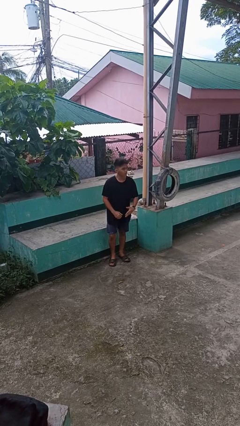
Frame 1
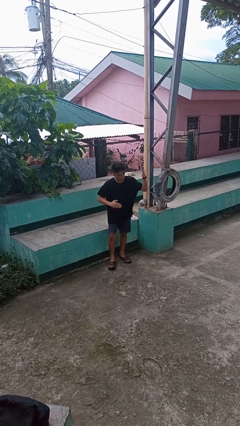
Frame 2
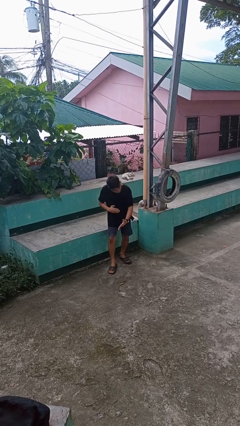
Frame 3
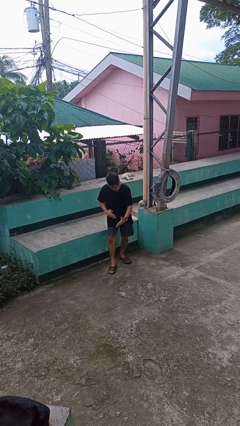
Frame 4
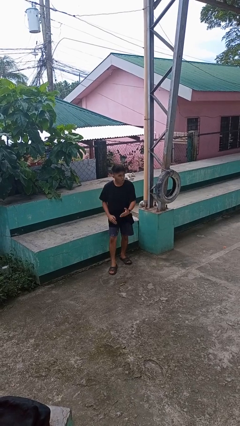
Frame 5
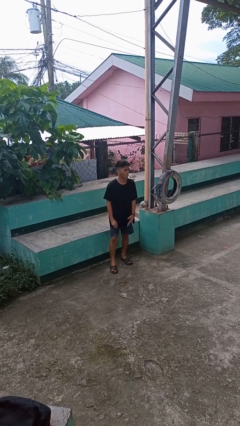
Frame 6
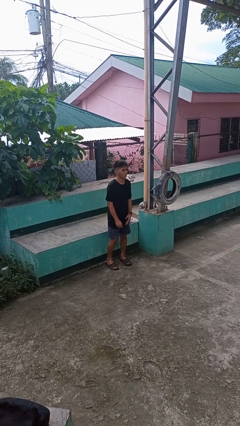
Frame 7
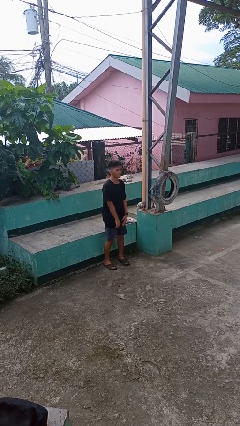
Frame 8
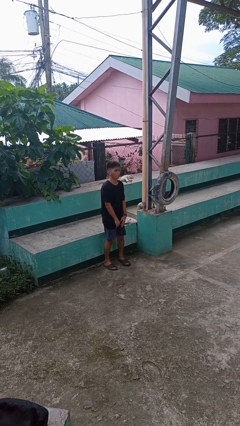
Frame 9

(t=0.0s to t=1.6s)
person karate chop

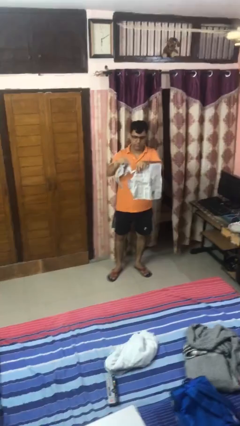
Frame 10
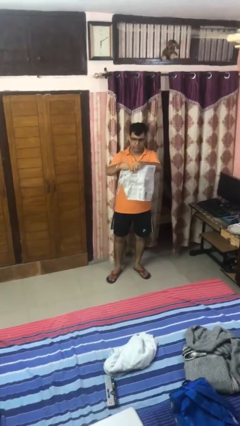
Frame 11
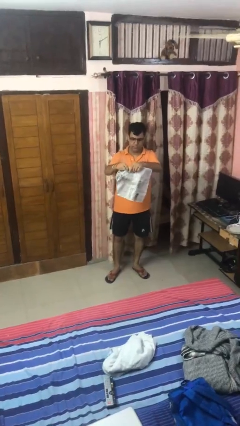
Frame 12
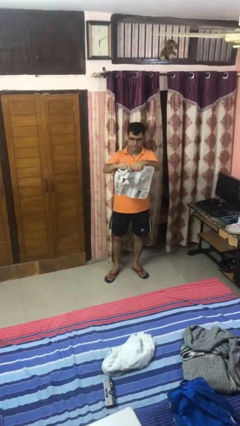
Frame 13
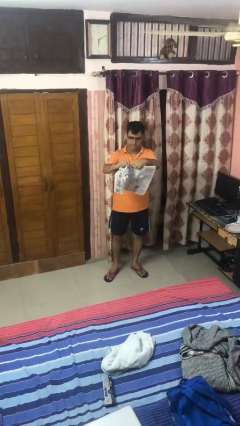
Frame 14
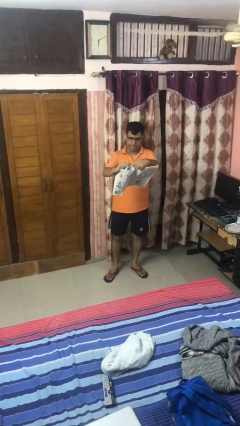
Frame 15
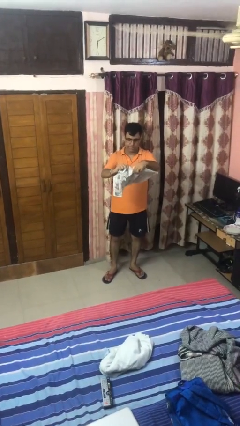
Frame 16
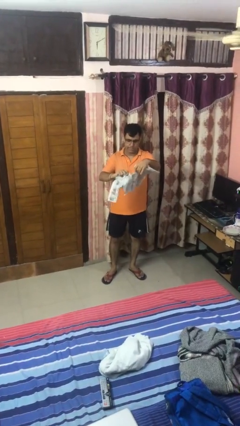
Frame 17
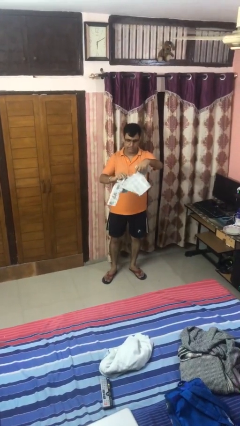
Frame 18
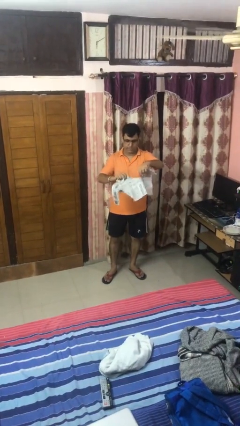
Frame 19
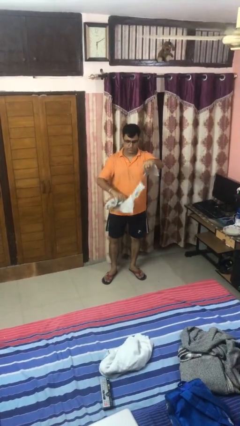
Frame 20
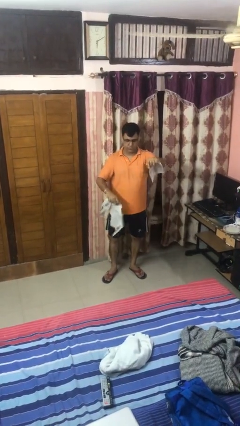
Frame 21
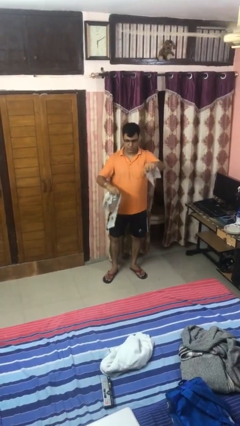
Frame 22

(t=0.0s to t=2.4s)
person tears paper

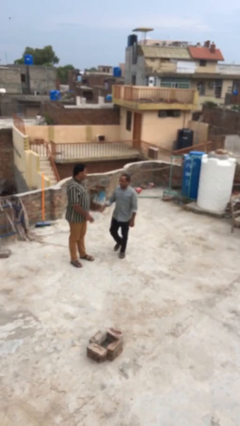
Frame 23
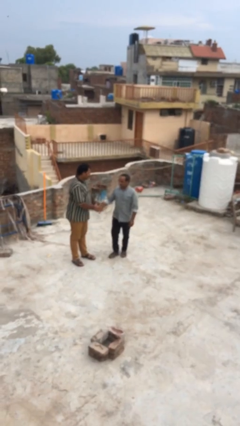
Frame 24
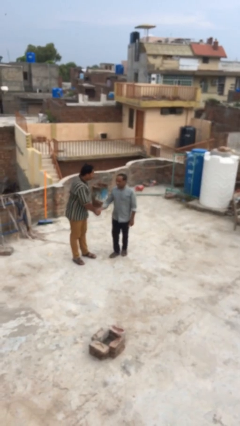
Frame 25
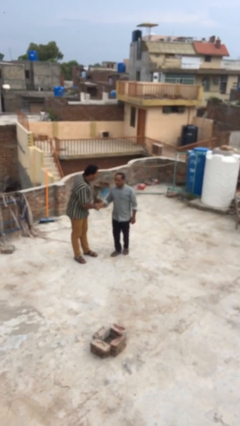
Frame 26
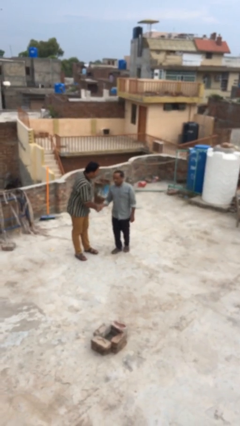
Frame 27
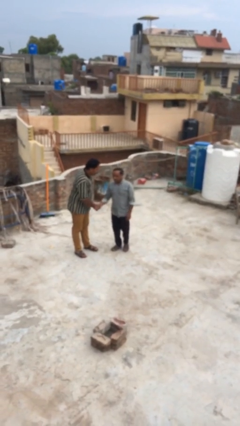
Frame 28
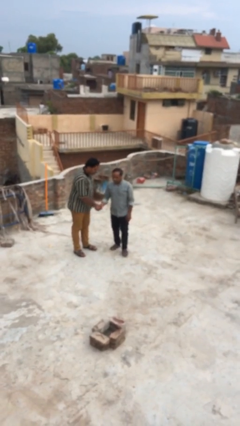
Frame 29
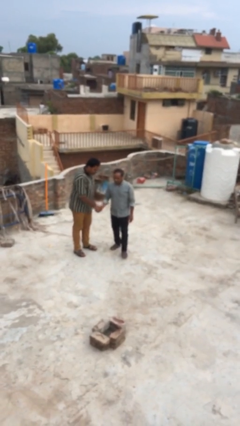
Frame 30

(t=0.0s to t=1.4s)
person shakes hand

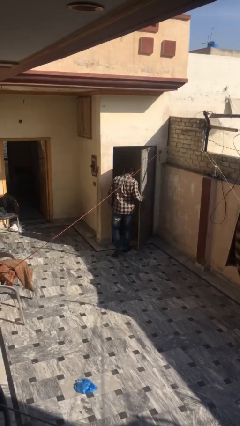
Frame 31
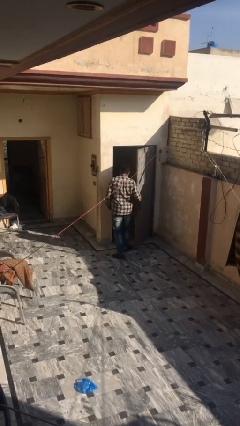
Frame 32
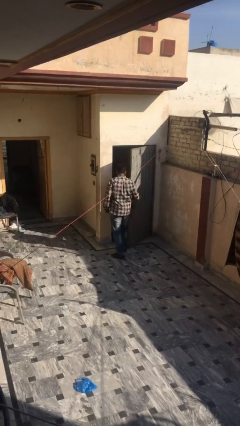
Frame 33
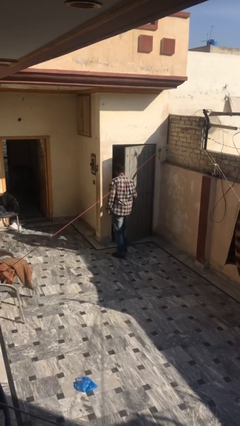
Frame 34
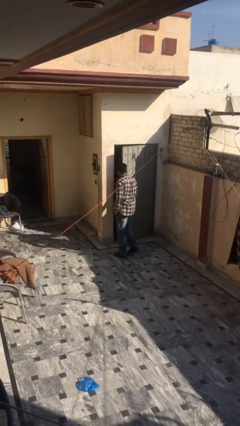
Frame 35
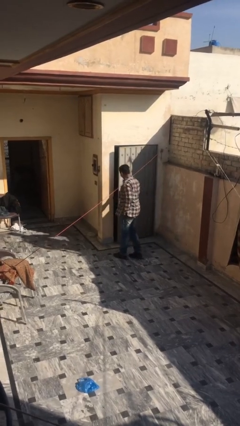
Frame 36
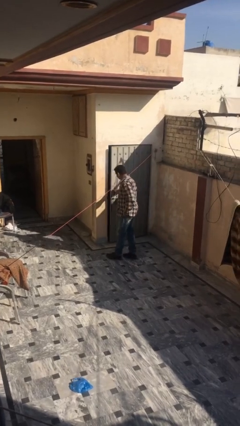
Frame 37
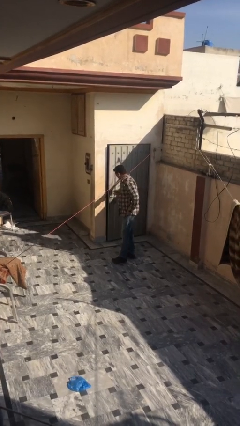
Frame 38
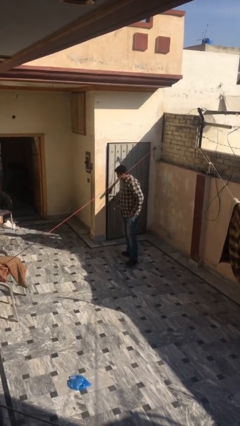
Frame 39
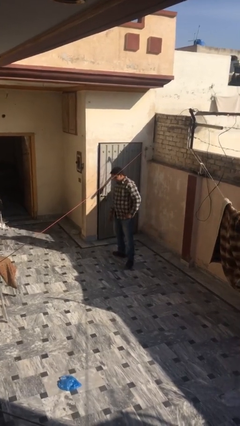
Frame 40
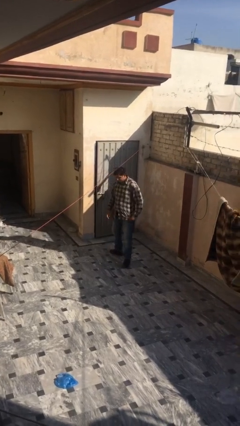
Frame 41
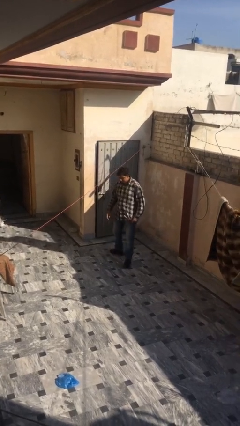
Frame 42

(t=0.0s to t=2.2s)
person closes facility door

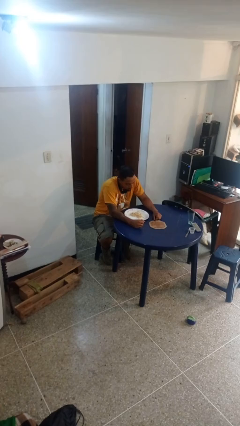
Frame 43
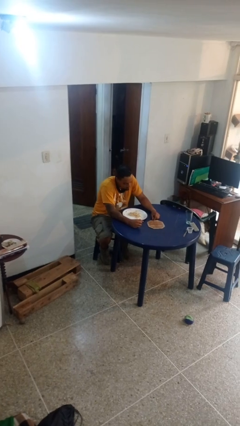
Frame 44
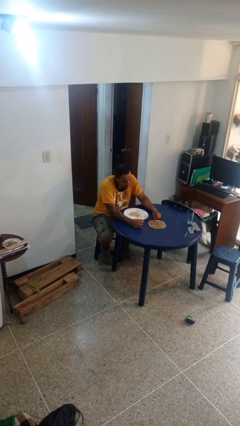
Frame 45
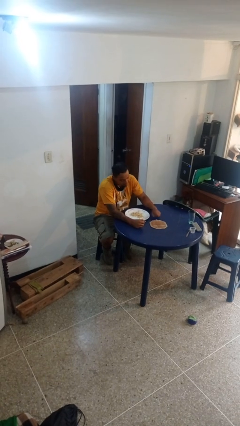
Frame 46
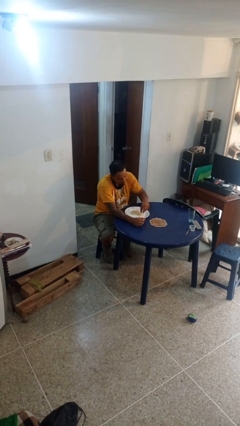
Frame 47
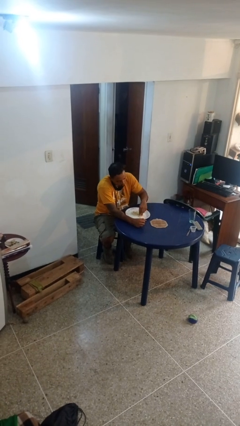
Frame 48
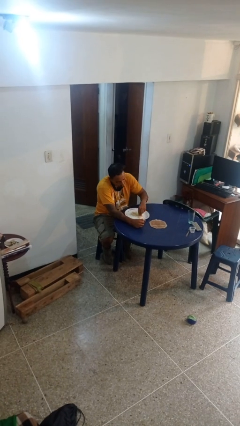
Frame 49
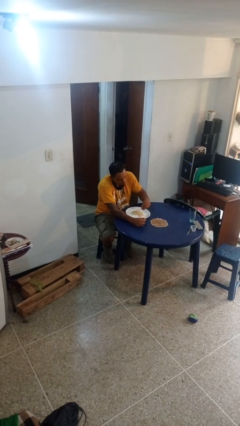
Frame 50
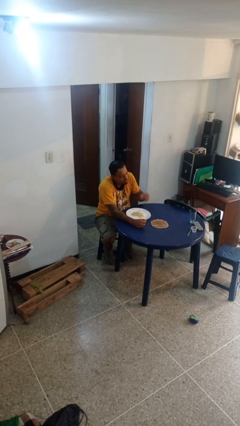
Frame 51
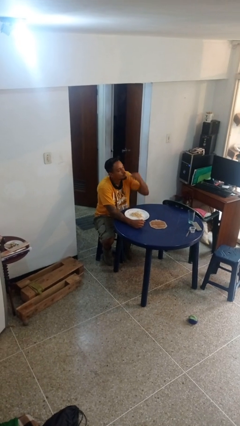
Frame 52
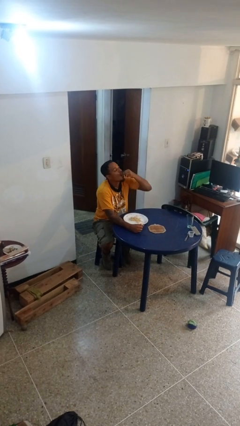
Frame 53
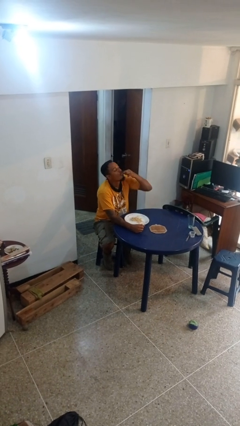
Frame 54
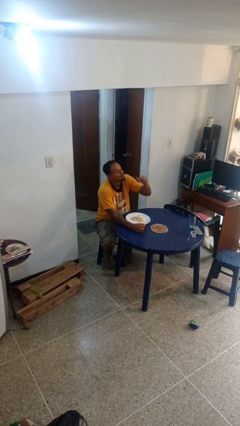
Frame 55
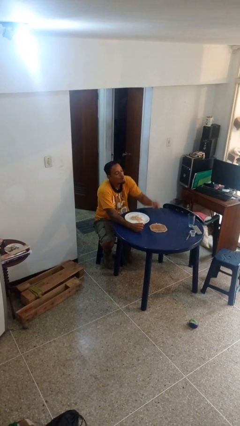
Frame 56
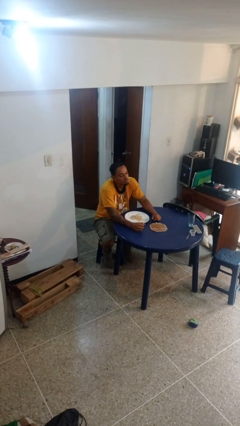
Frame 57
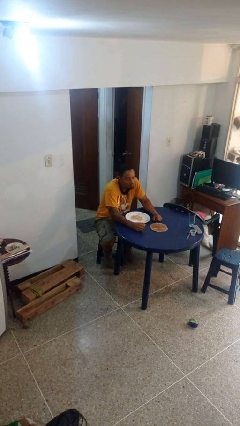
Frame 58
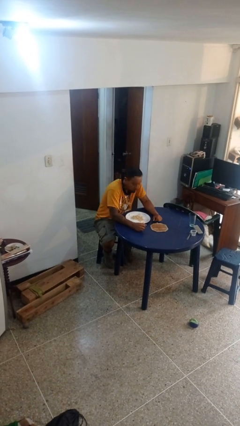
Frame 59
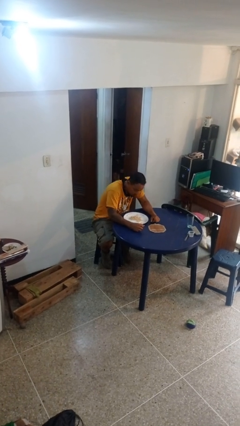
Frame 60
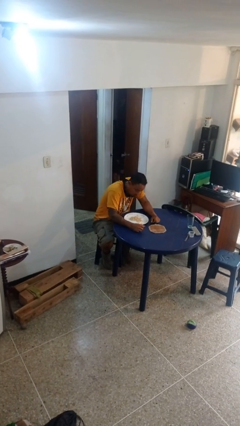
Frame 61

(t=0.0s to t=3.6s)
person eats with hands

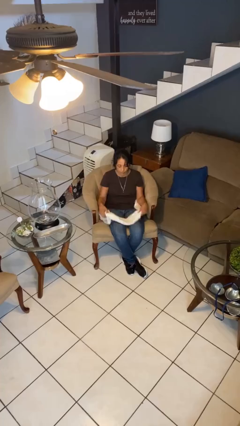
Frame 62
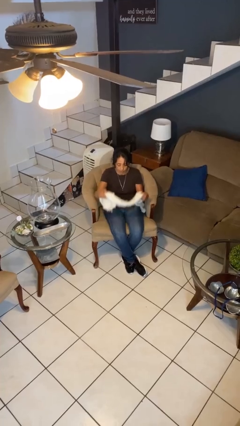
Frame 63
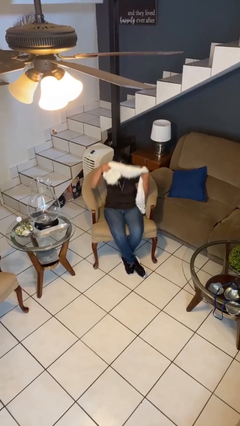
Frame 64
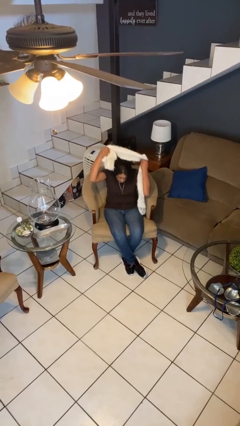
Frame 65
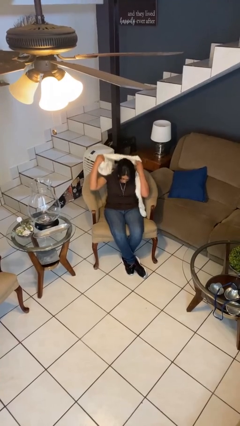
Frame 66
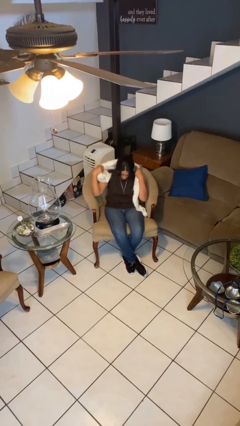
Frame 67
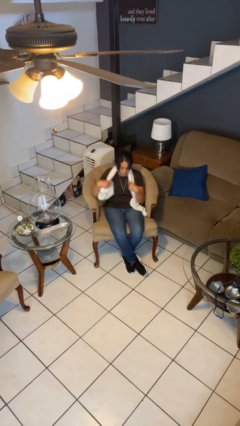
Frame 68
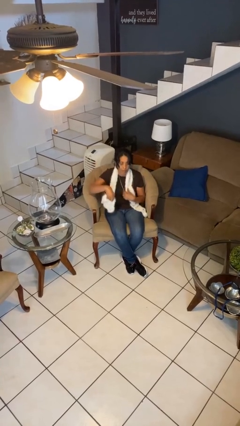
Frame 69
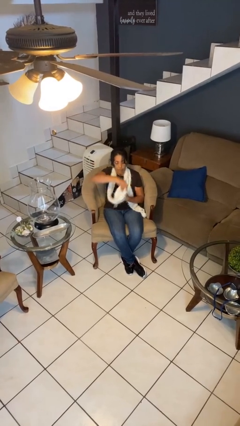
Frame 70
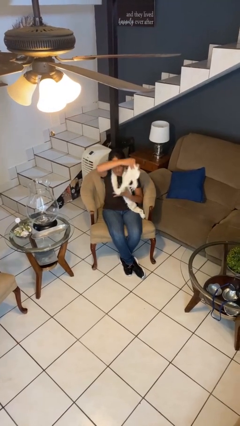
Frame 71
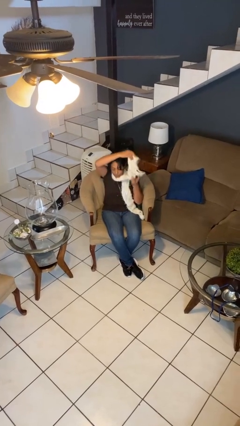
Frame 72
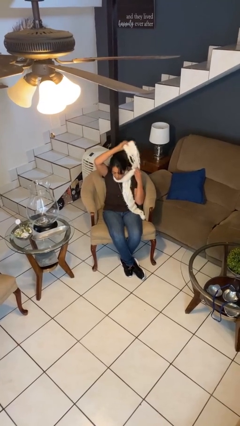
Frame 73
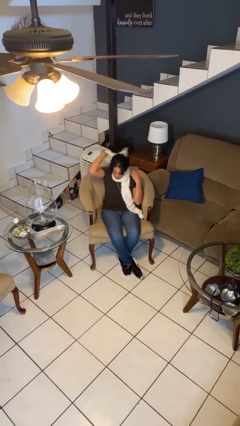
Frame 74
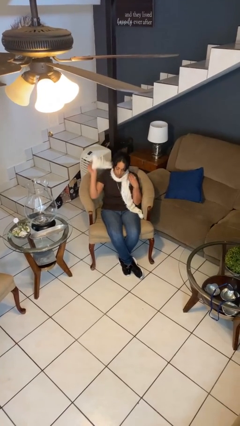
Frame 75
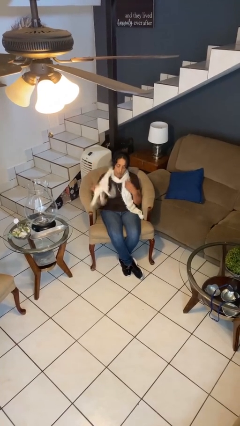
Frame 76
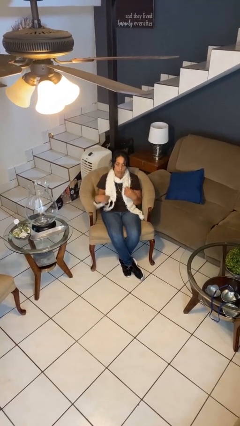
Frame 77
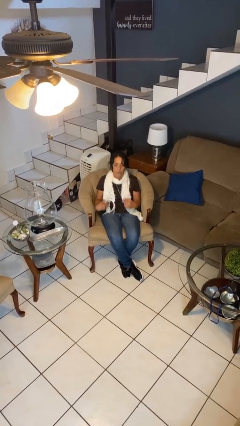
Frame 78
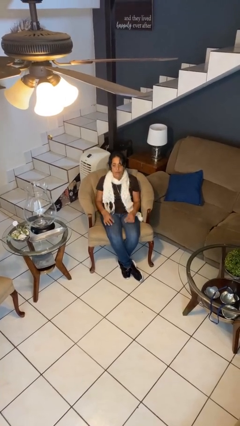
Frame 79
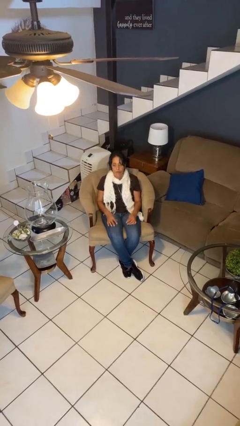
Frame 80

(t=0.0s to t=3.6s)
person puts on scarf

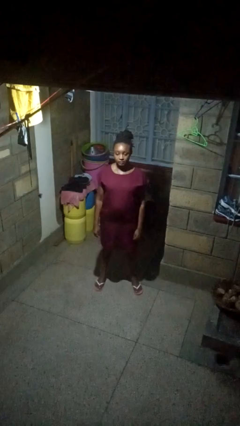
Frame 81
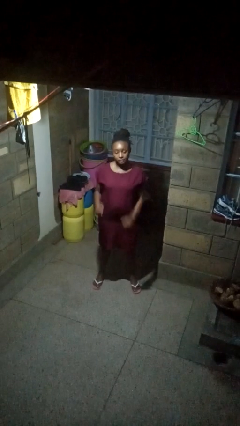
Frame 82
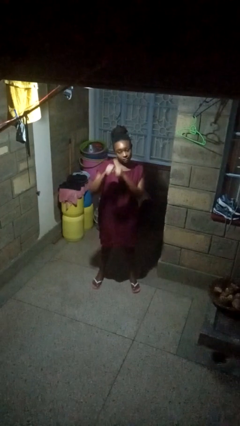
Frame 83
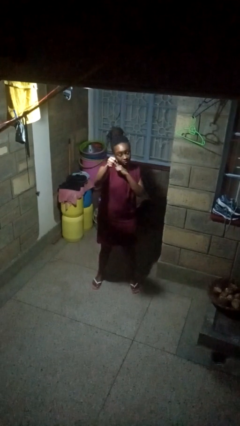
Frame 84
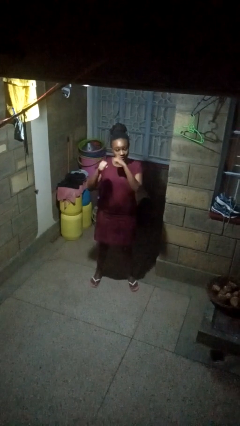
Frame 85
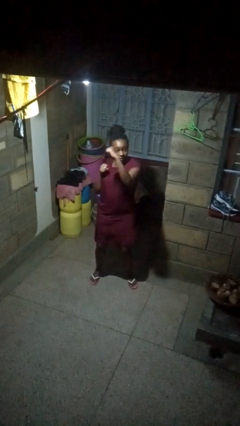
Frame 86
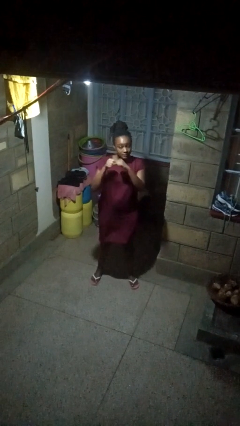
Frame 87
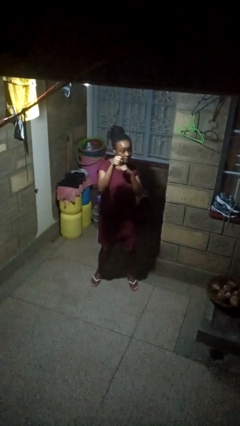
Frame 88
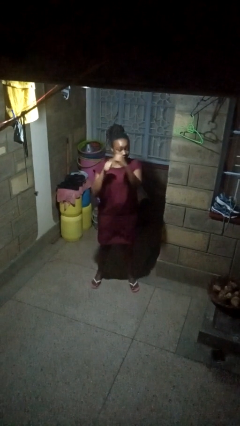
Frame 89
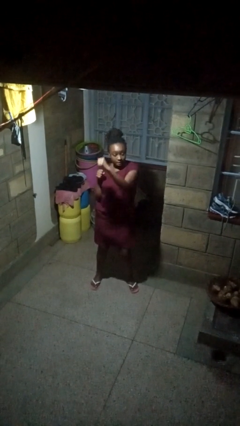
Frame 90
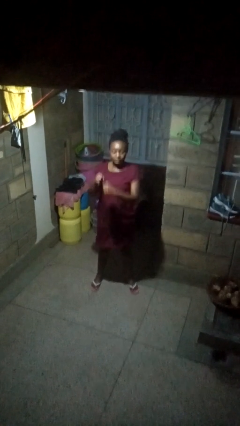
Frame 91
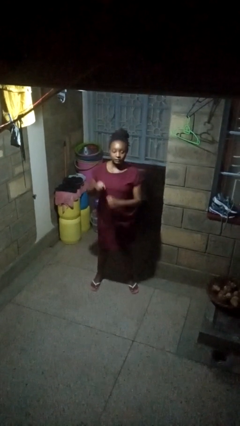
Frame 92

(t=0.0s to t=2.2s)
person punches

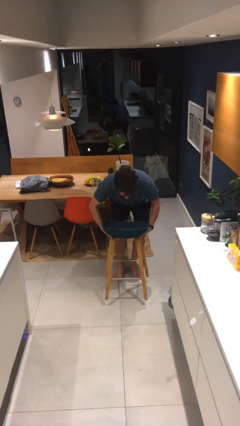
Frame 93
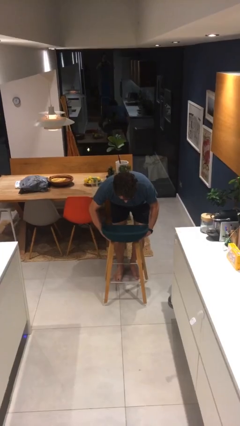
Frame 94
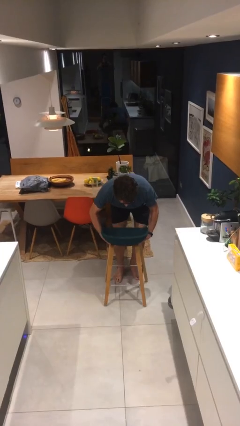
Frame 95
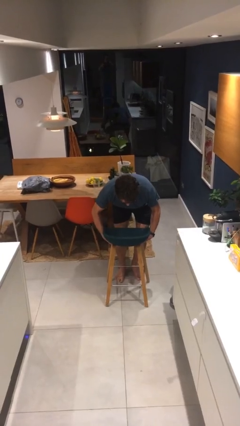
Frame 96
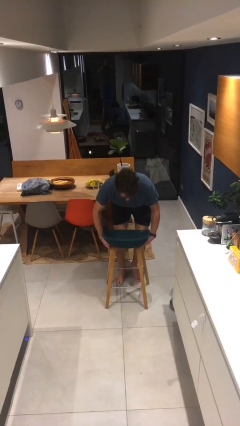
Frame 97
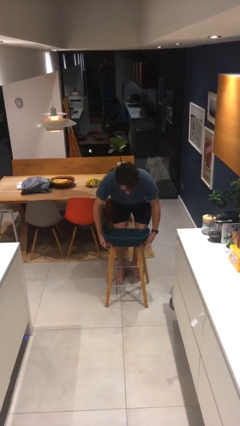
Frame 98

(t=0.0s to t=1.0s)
person puts down object on floor
